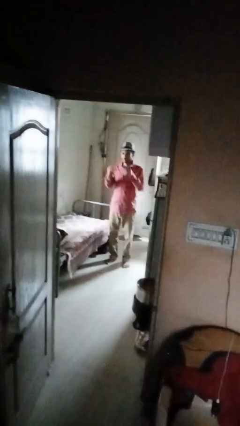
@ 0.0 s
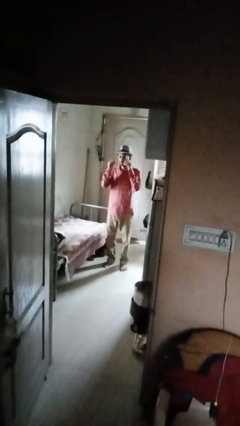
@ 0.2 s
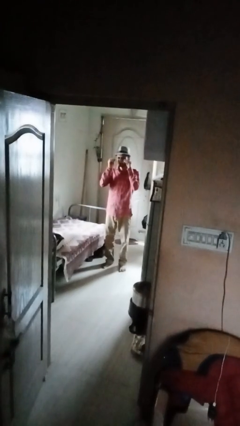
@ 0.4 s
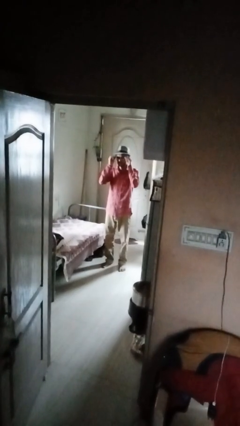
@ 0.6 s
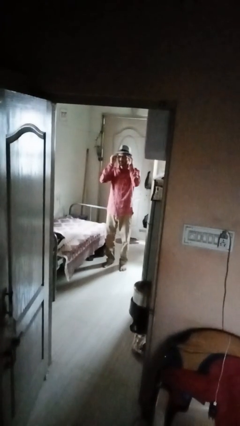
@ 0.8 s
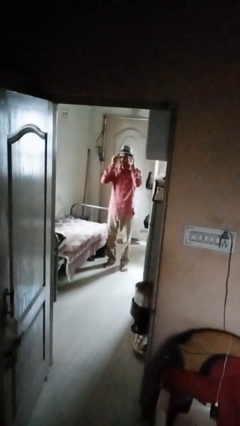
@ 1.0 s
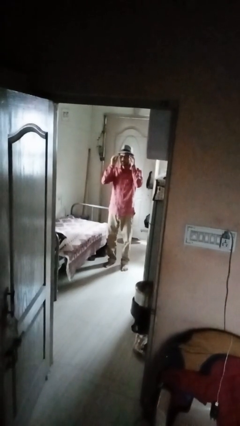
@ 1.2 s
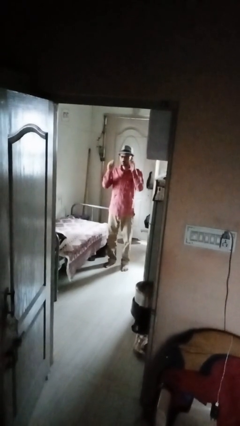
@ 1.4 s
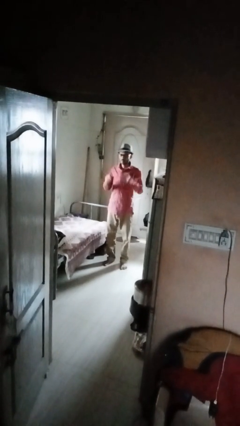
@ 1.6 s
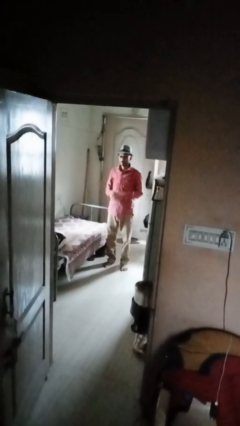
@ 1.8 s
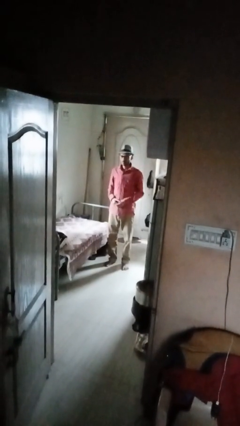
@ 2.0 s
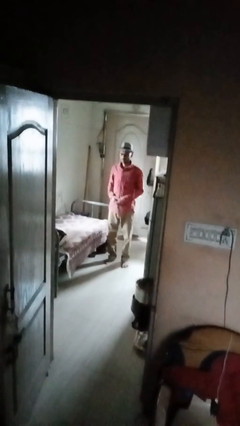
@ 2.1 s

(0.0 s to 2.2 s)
person puts on glasses

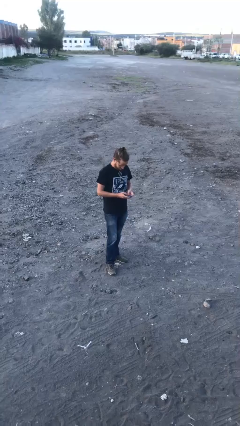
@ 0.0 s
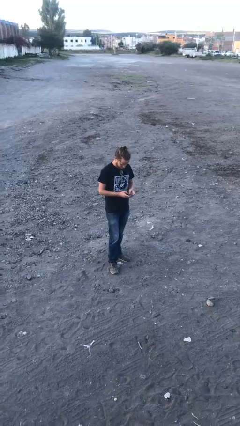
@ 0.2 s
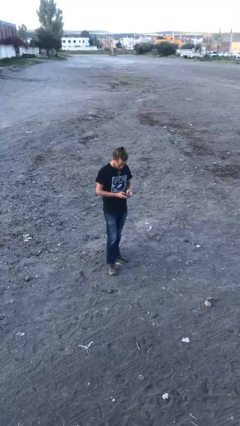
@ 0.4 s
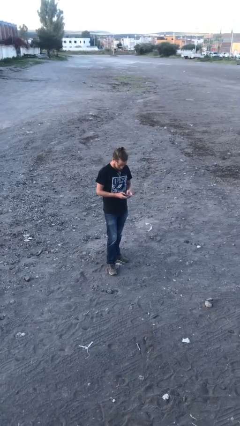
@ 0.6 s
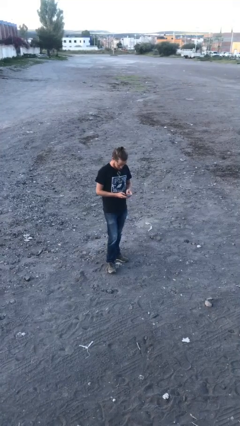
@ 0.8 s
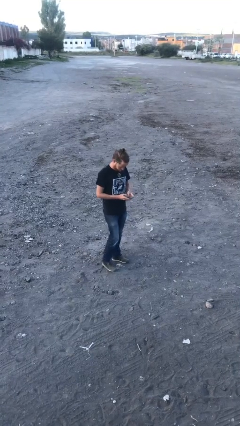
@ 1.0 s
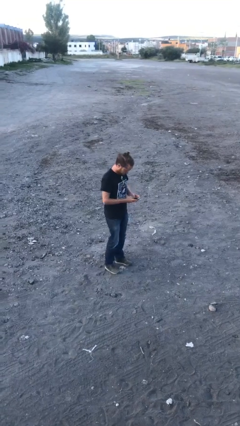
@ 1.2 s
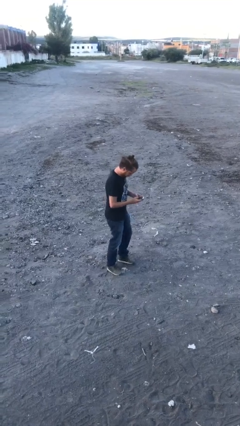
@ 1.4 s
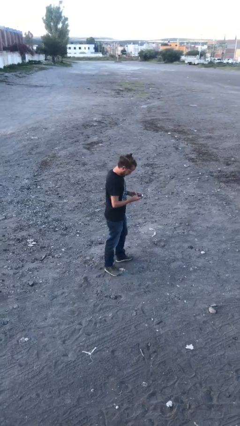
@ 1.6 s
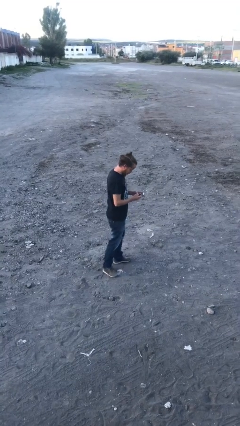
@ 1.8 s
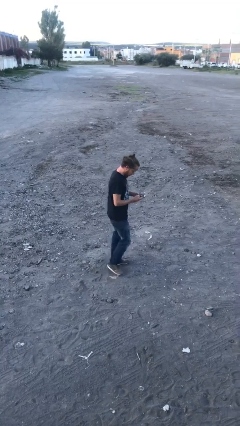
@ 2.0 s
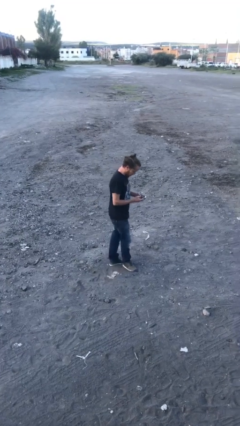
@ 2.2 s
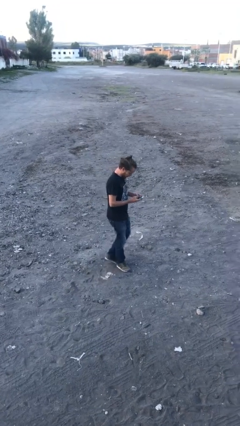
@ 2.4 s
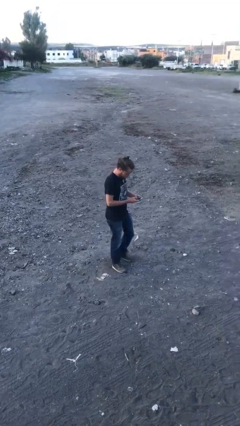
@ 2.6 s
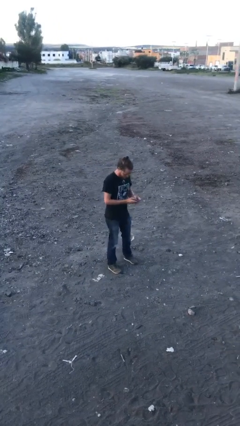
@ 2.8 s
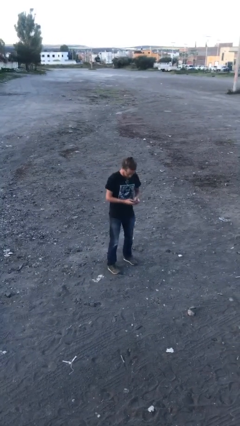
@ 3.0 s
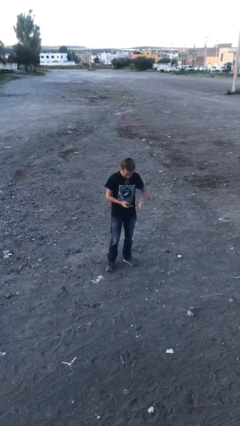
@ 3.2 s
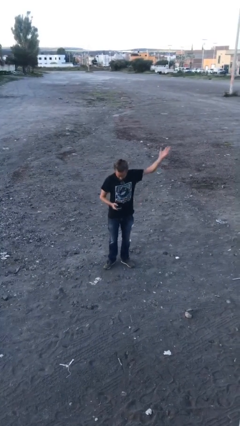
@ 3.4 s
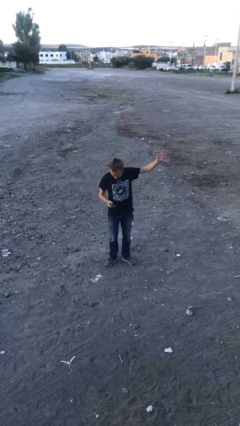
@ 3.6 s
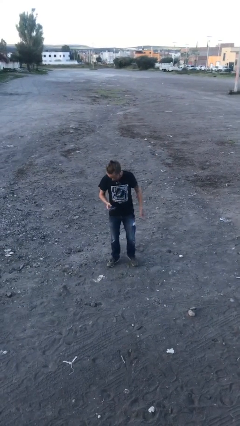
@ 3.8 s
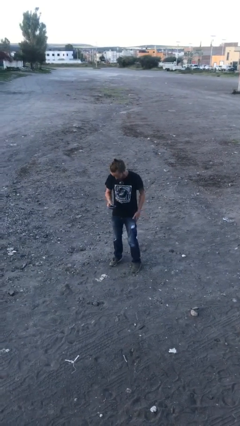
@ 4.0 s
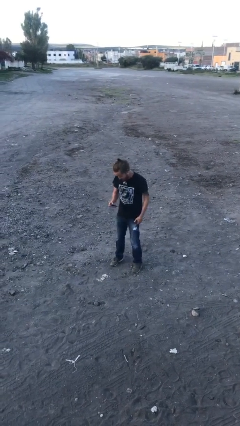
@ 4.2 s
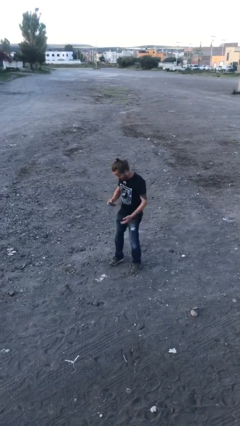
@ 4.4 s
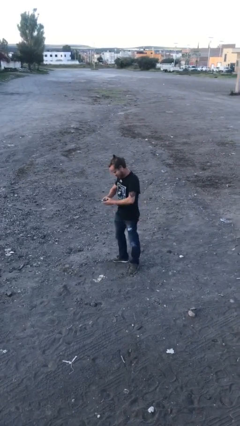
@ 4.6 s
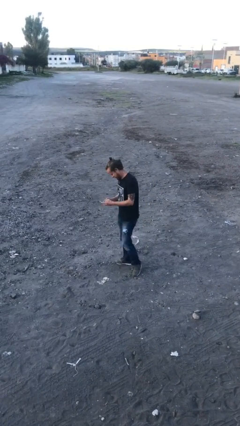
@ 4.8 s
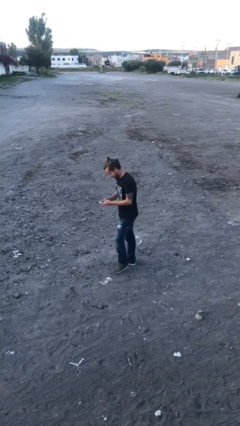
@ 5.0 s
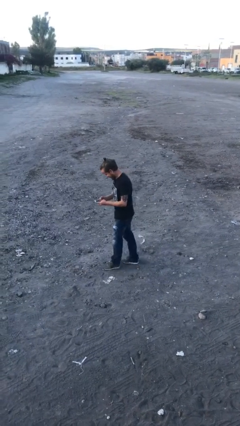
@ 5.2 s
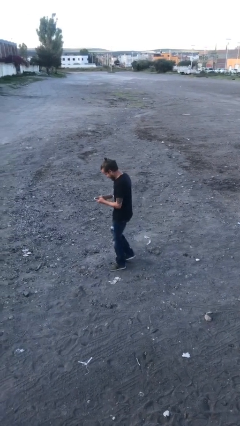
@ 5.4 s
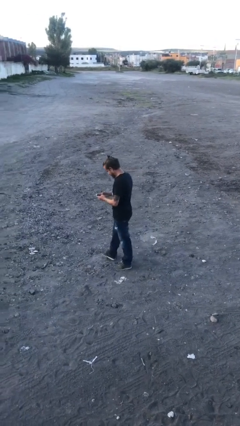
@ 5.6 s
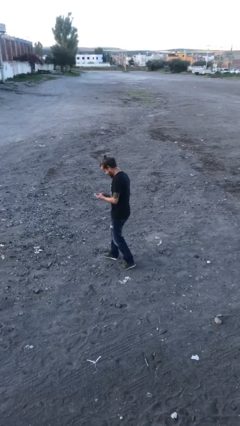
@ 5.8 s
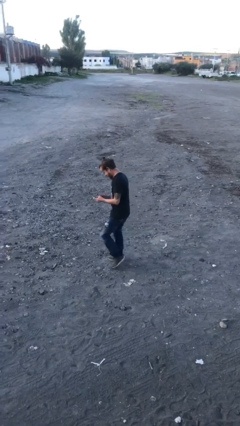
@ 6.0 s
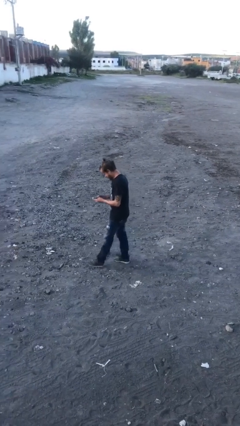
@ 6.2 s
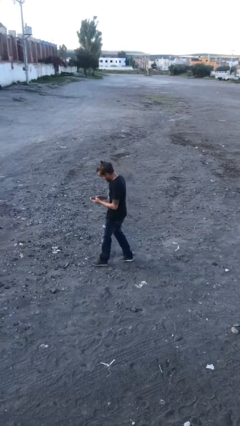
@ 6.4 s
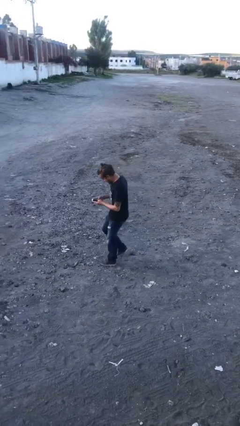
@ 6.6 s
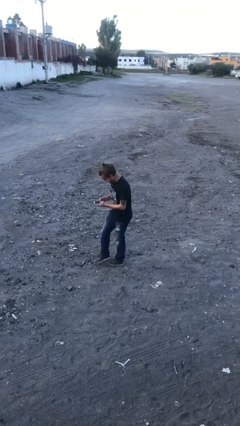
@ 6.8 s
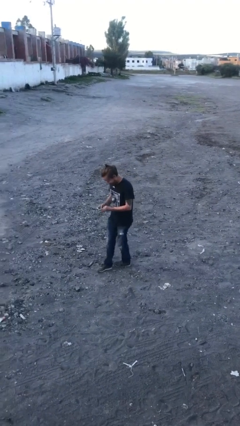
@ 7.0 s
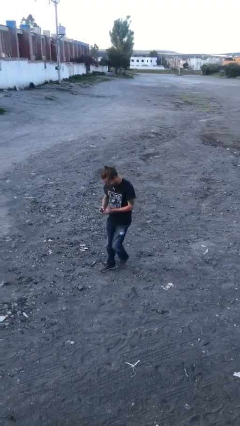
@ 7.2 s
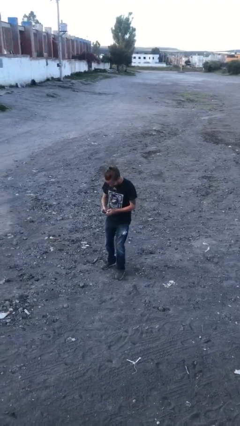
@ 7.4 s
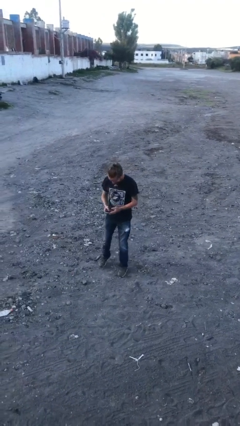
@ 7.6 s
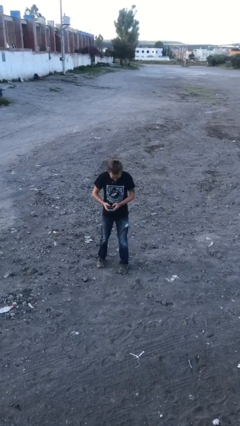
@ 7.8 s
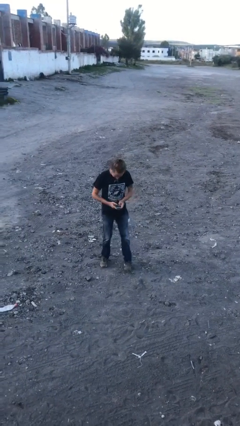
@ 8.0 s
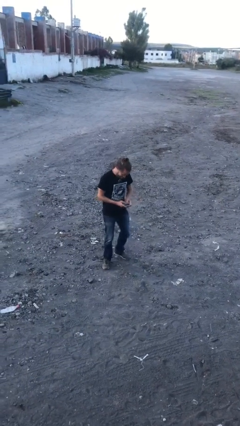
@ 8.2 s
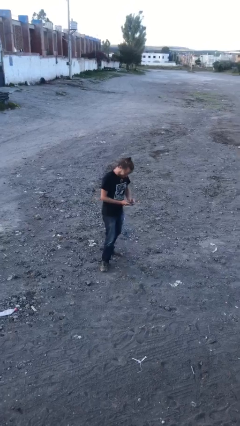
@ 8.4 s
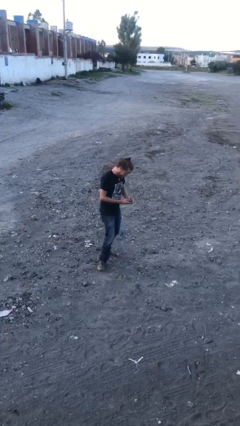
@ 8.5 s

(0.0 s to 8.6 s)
person texts on phone

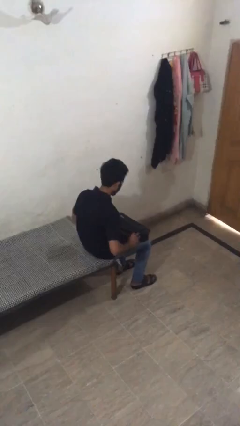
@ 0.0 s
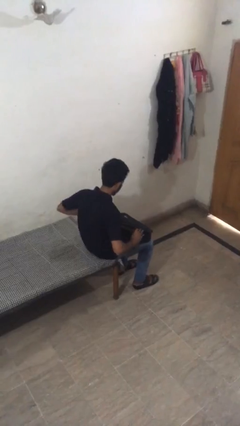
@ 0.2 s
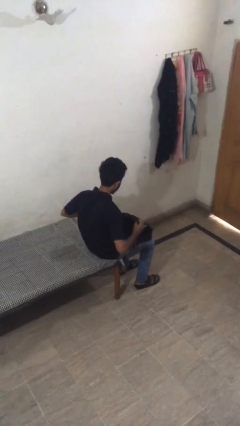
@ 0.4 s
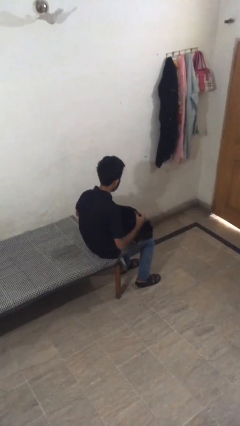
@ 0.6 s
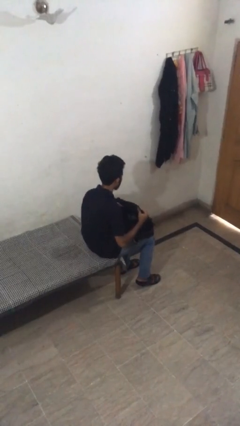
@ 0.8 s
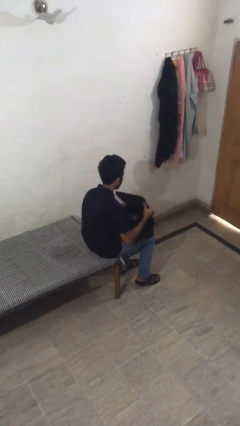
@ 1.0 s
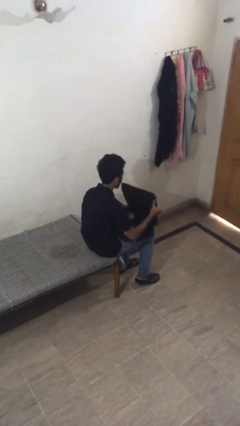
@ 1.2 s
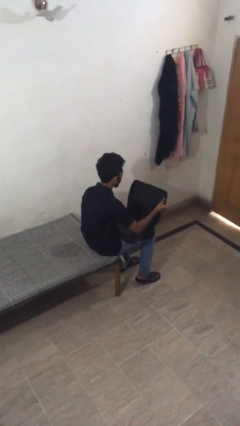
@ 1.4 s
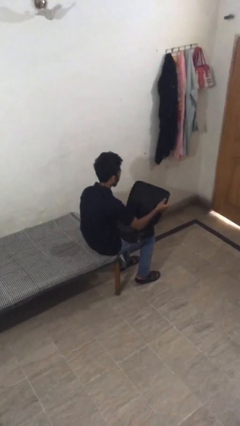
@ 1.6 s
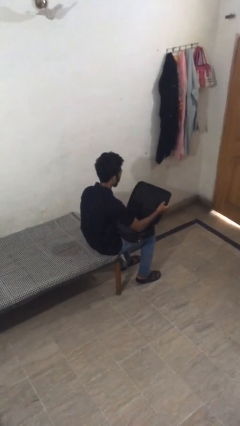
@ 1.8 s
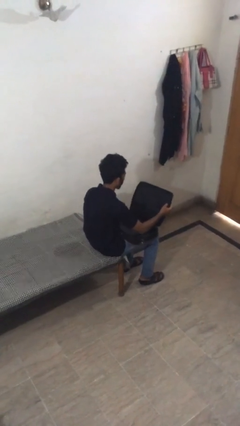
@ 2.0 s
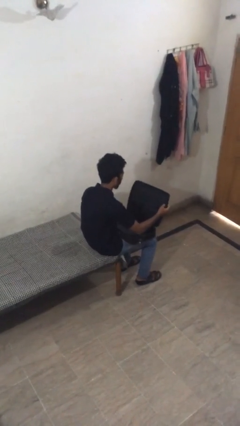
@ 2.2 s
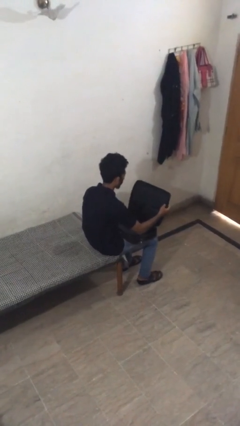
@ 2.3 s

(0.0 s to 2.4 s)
person opens suitcase

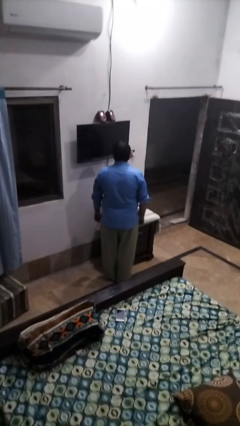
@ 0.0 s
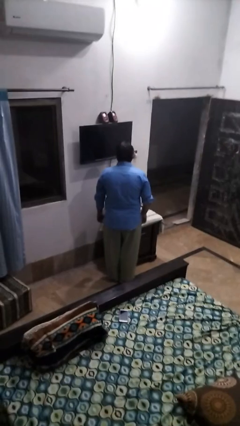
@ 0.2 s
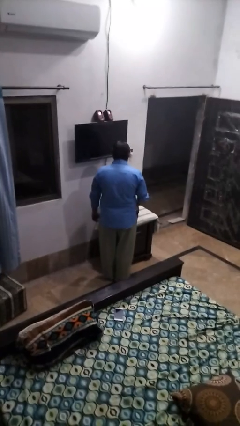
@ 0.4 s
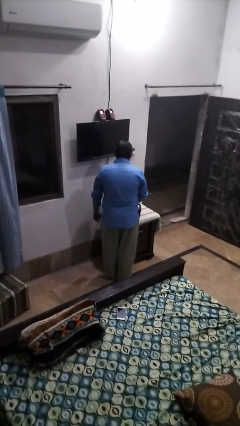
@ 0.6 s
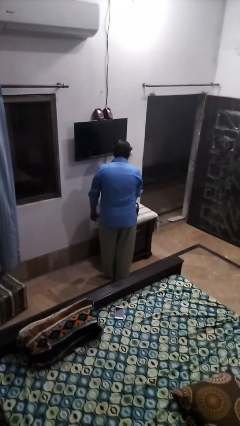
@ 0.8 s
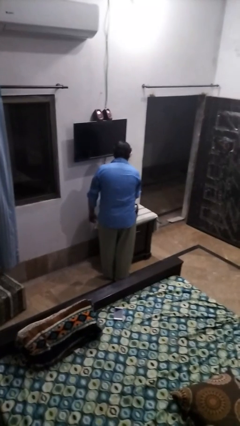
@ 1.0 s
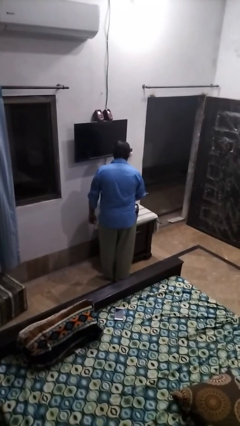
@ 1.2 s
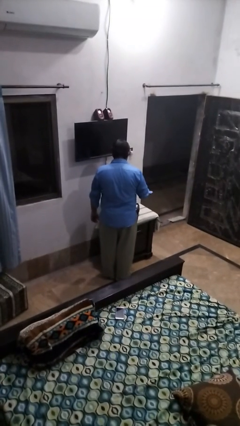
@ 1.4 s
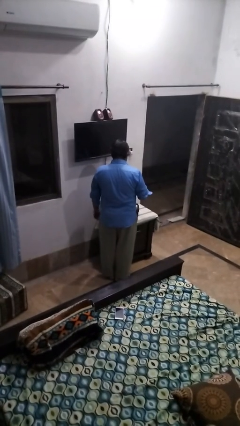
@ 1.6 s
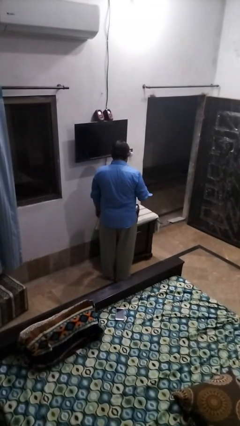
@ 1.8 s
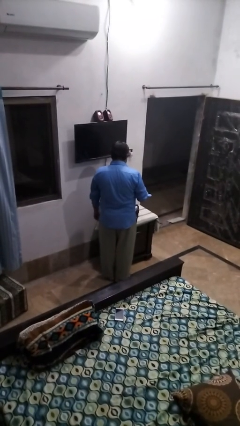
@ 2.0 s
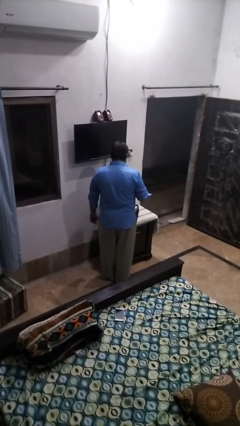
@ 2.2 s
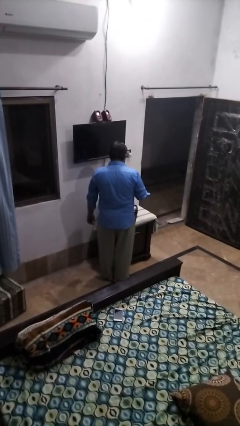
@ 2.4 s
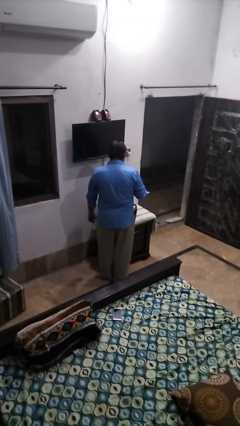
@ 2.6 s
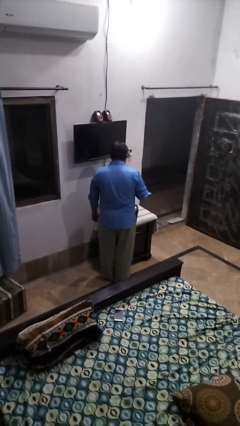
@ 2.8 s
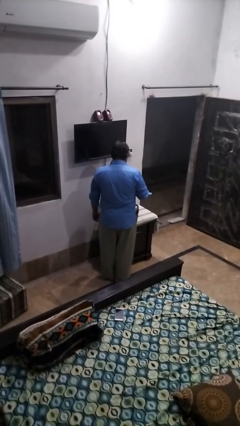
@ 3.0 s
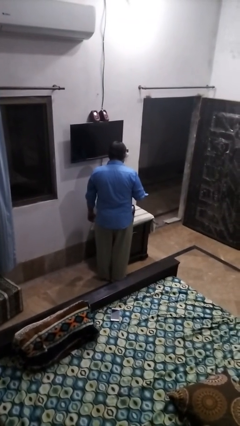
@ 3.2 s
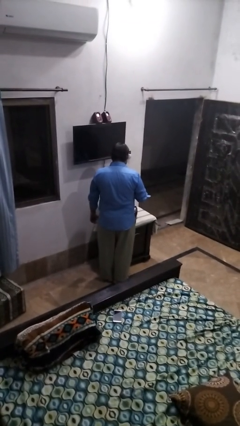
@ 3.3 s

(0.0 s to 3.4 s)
person takes object from bag

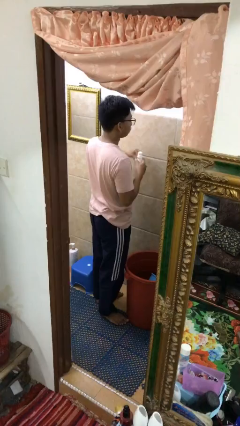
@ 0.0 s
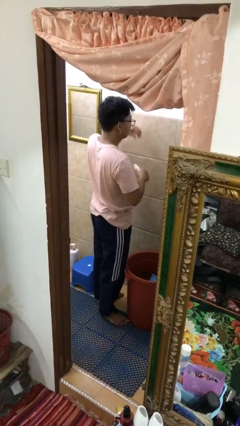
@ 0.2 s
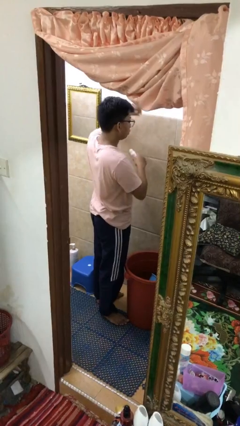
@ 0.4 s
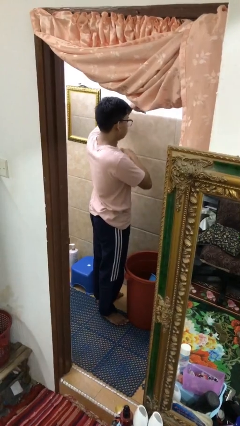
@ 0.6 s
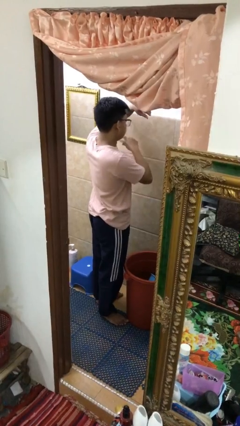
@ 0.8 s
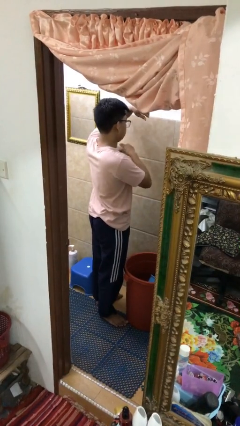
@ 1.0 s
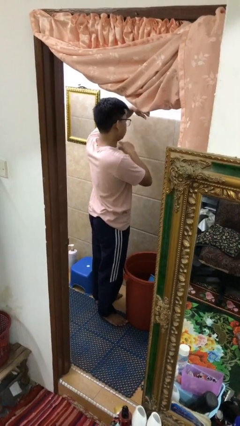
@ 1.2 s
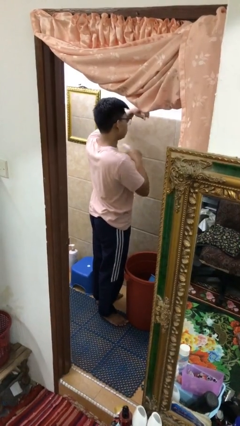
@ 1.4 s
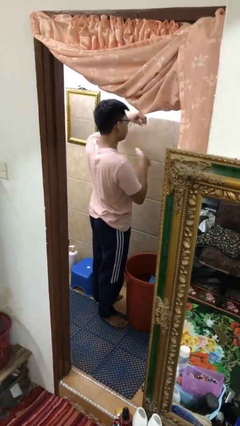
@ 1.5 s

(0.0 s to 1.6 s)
person applies deodorant
